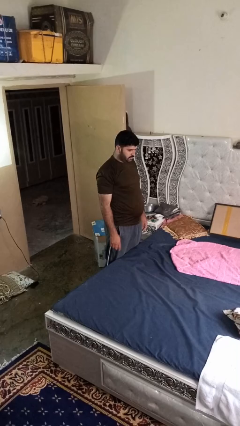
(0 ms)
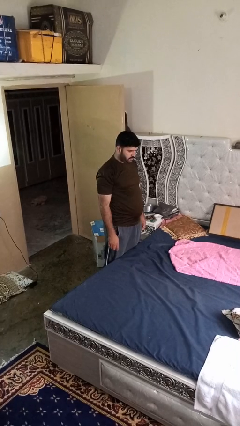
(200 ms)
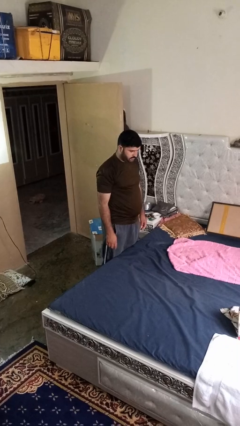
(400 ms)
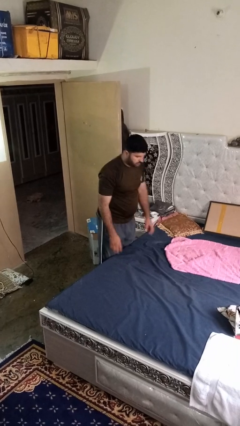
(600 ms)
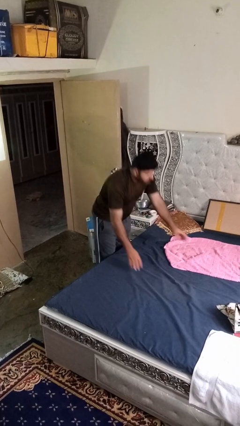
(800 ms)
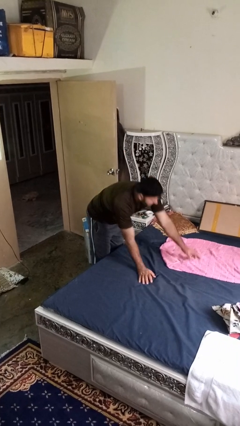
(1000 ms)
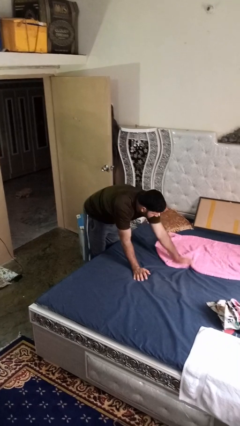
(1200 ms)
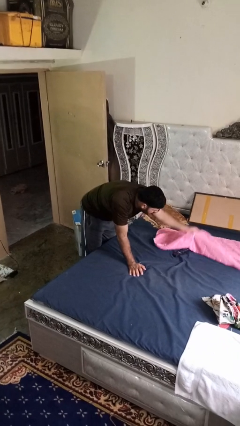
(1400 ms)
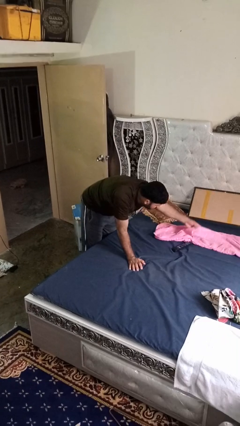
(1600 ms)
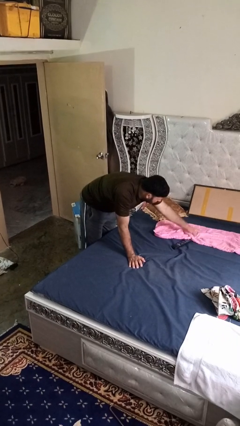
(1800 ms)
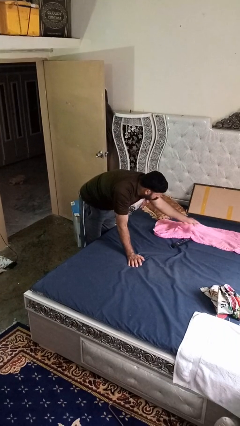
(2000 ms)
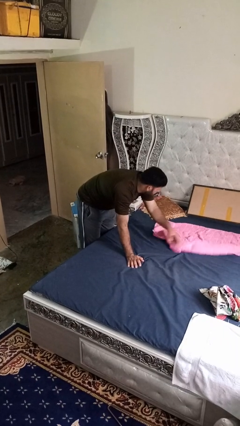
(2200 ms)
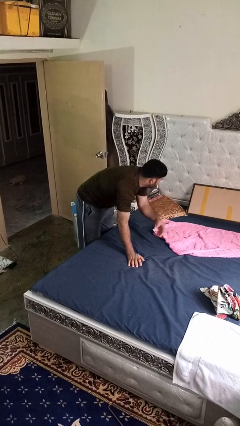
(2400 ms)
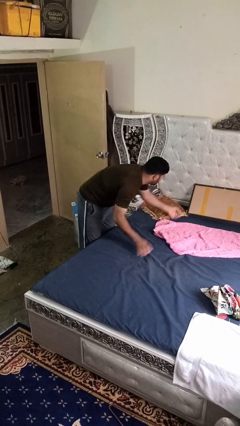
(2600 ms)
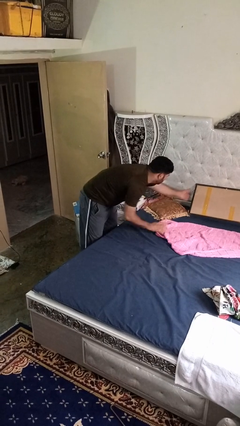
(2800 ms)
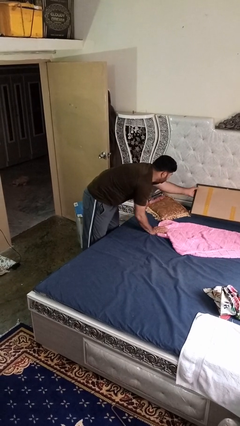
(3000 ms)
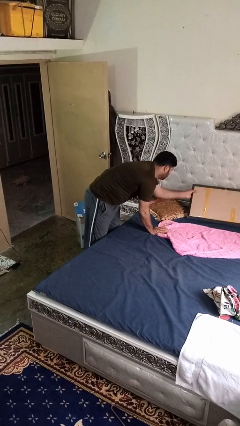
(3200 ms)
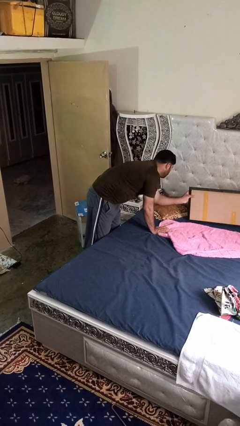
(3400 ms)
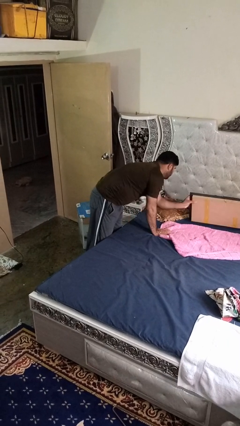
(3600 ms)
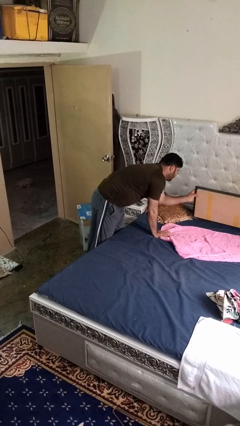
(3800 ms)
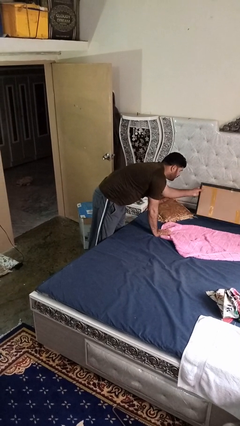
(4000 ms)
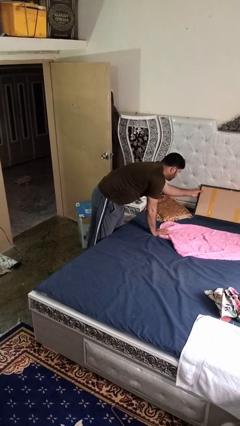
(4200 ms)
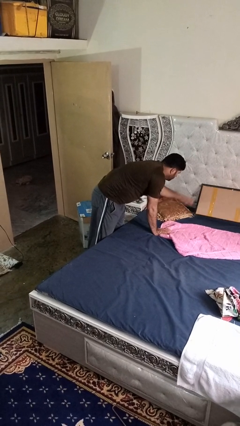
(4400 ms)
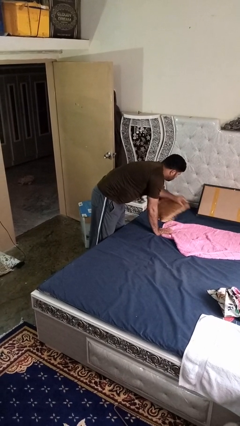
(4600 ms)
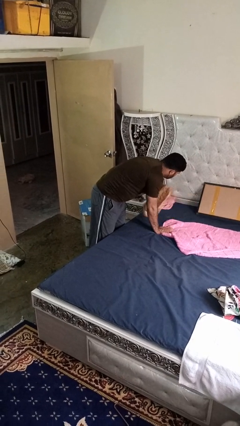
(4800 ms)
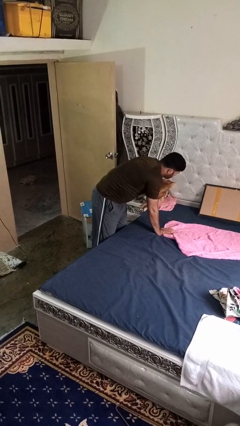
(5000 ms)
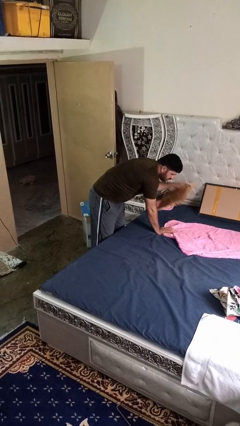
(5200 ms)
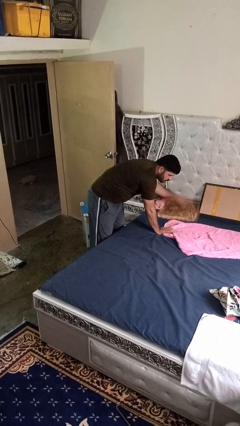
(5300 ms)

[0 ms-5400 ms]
person searches under bed

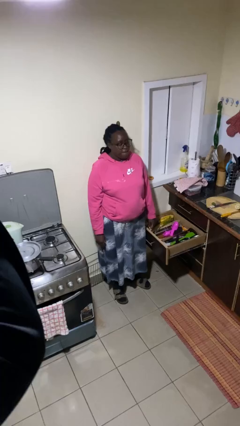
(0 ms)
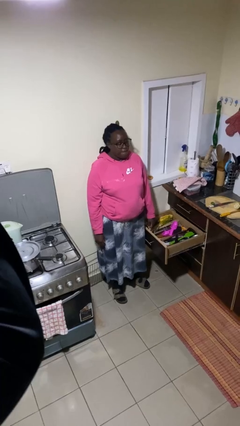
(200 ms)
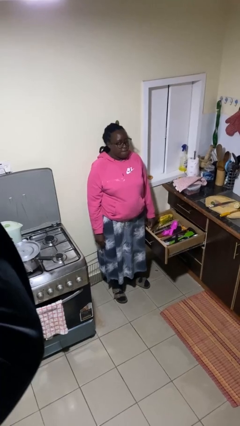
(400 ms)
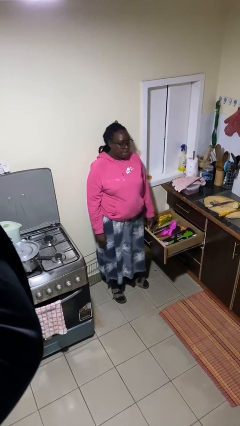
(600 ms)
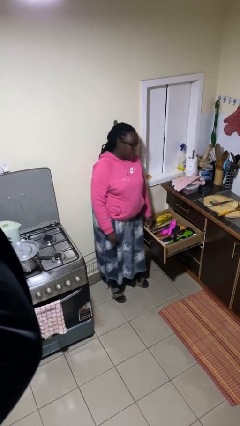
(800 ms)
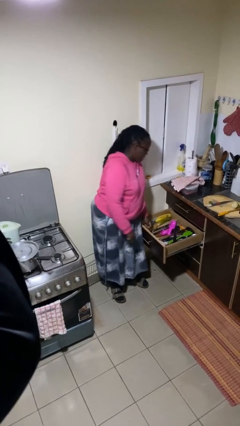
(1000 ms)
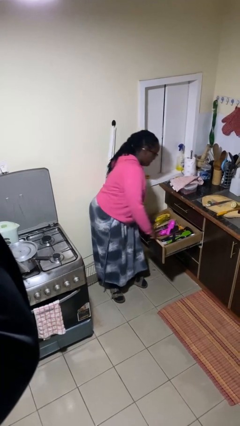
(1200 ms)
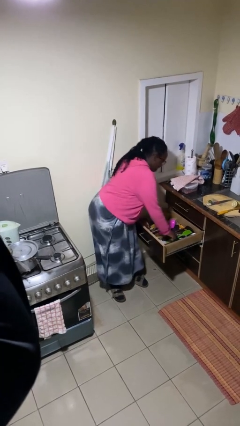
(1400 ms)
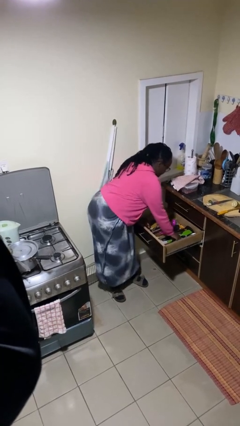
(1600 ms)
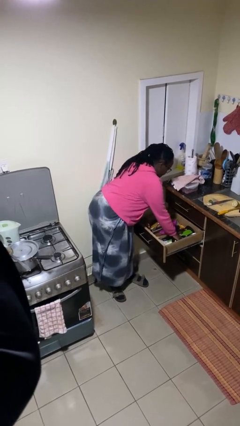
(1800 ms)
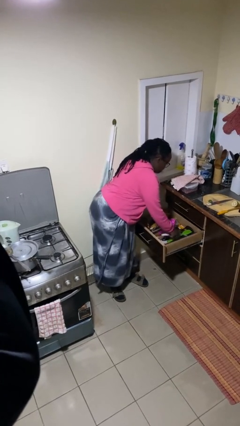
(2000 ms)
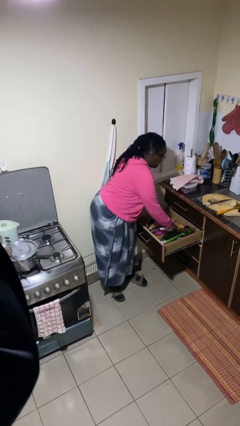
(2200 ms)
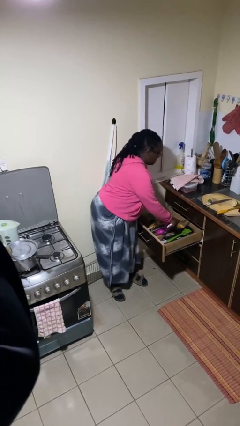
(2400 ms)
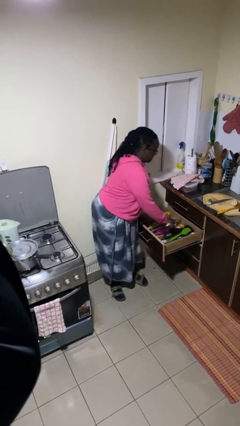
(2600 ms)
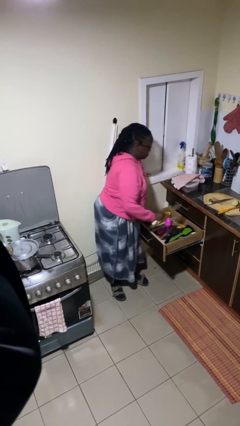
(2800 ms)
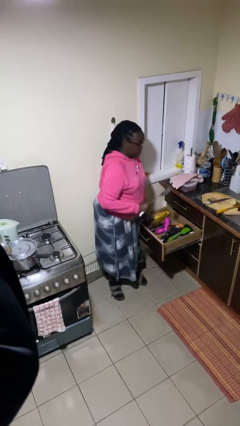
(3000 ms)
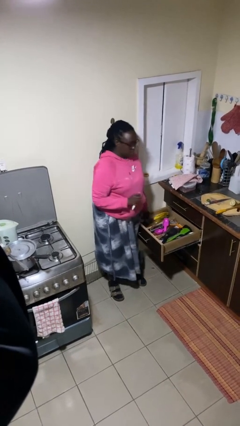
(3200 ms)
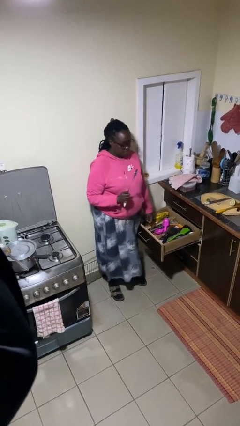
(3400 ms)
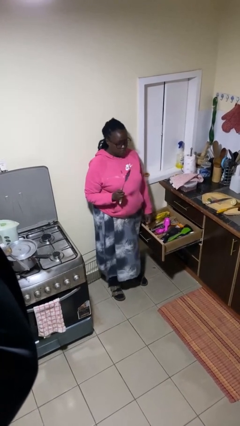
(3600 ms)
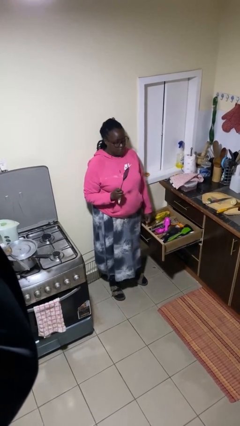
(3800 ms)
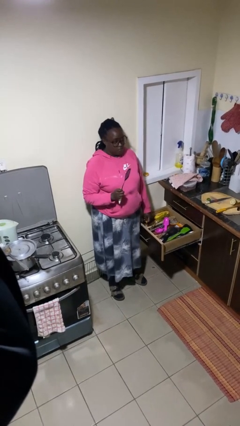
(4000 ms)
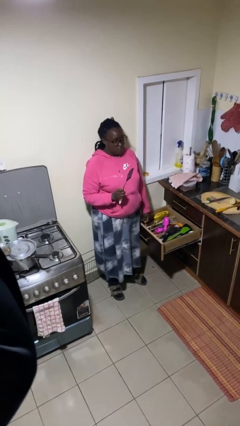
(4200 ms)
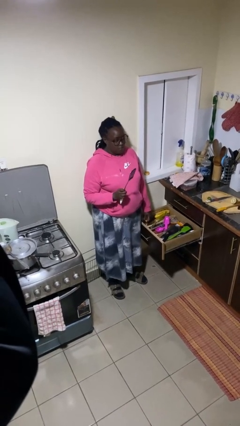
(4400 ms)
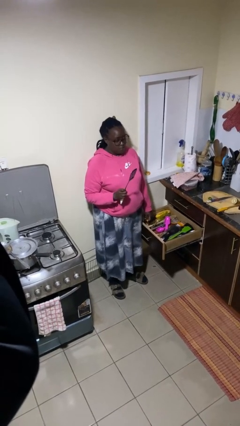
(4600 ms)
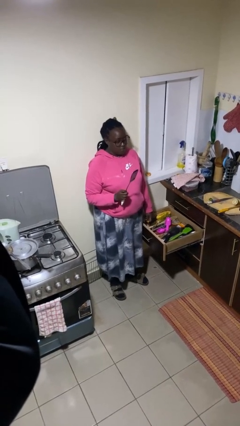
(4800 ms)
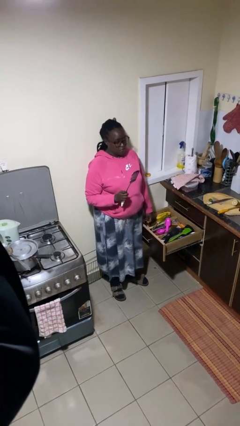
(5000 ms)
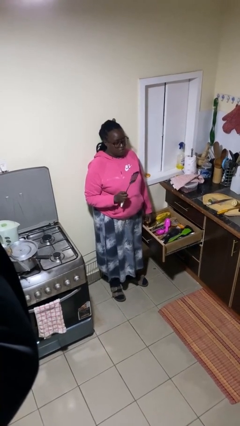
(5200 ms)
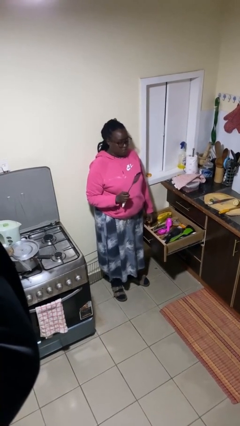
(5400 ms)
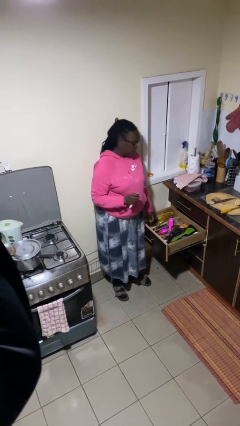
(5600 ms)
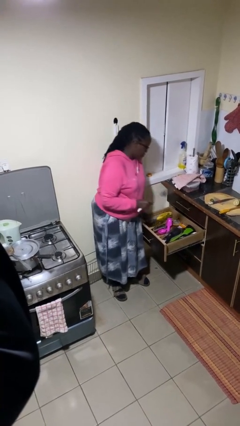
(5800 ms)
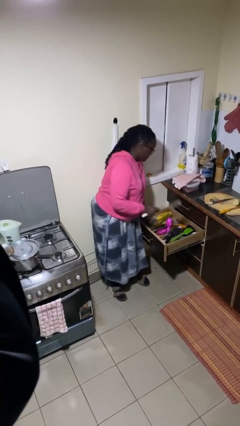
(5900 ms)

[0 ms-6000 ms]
person takes object from kitchen drawer

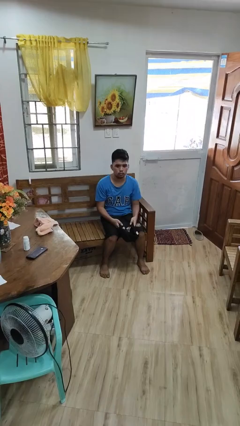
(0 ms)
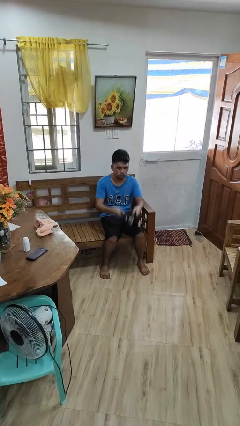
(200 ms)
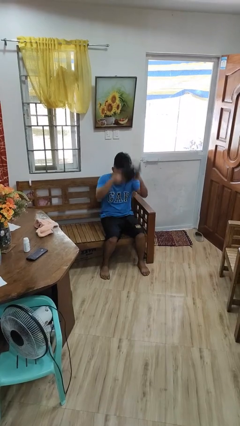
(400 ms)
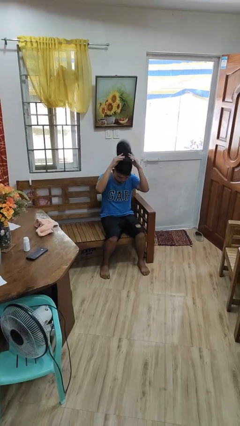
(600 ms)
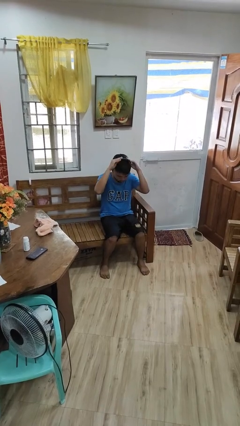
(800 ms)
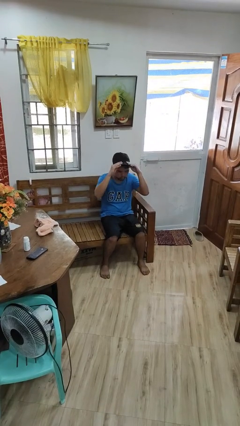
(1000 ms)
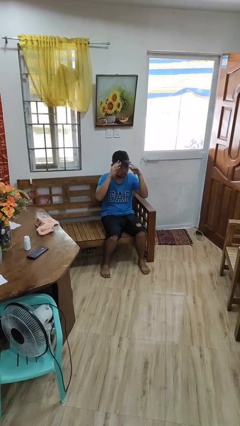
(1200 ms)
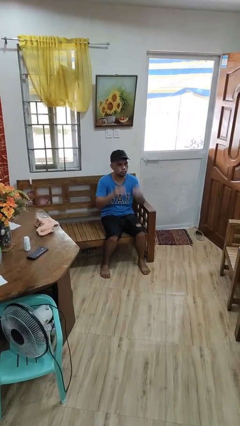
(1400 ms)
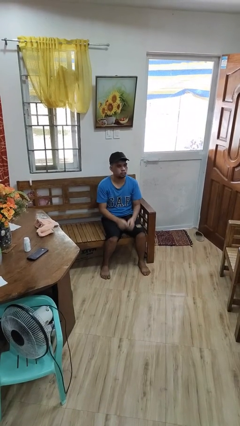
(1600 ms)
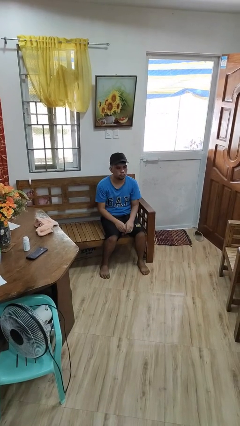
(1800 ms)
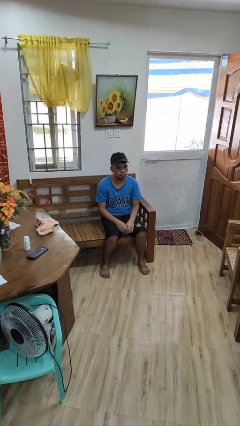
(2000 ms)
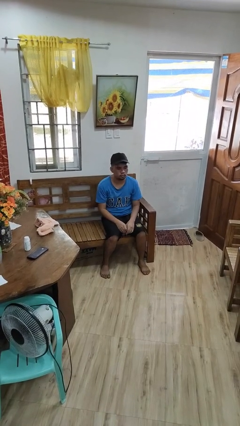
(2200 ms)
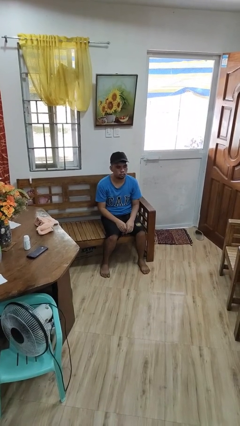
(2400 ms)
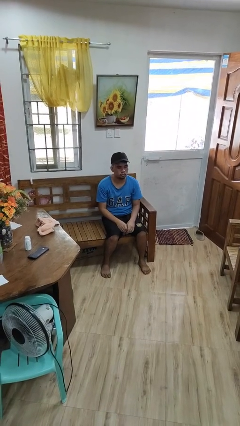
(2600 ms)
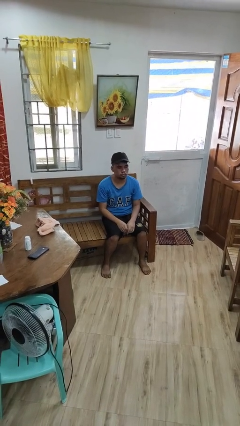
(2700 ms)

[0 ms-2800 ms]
person puts on hat

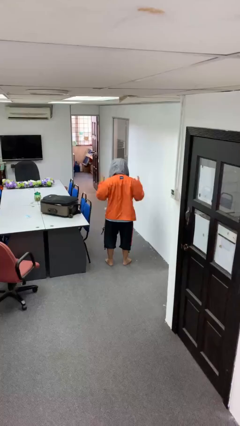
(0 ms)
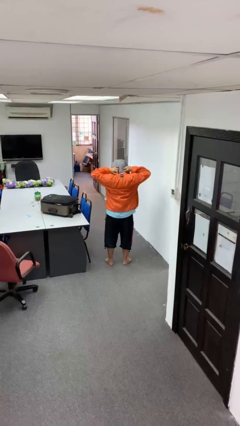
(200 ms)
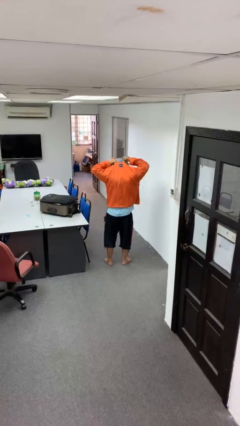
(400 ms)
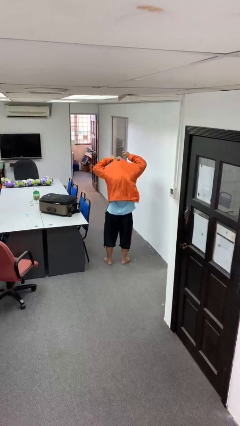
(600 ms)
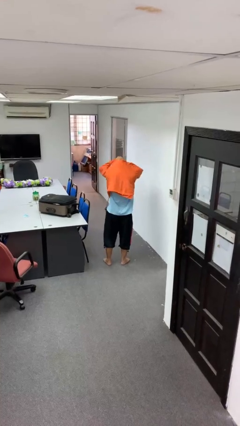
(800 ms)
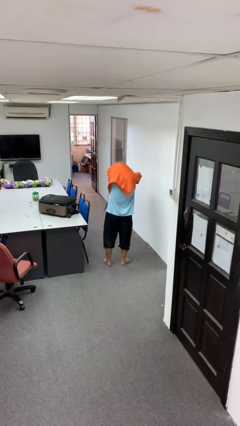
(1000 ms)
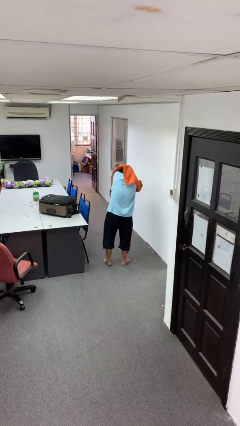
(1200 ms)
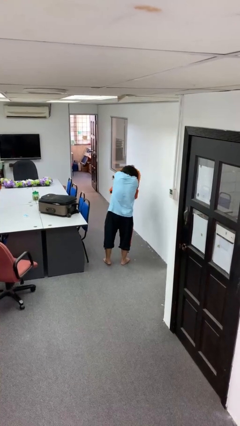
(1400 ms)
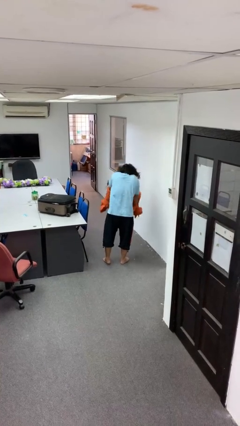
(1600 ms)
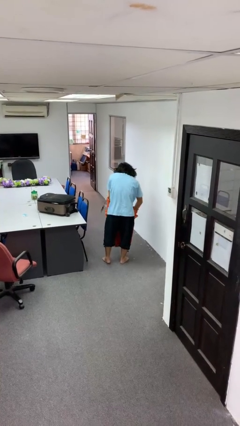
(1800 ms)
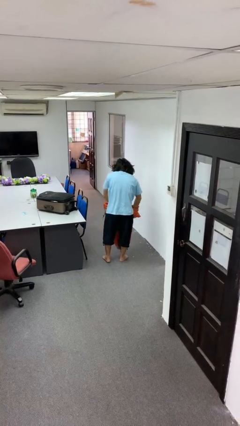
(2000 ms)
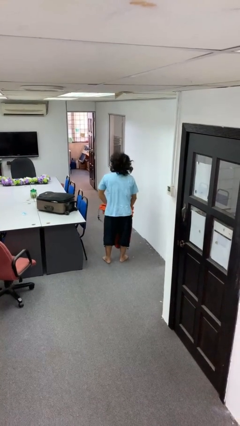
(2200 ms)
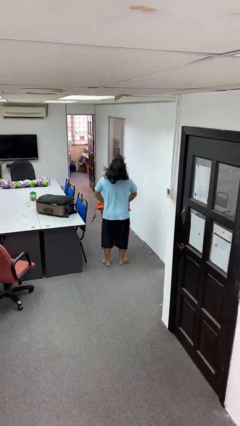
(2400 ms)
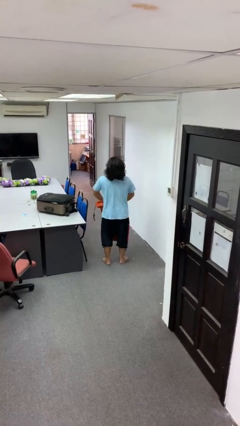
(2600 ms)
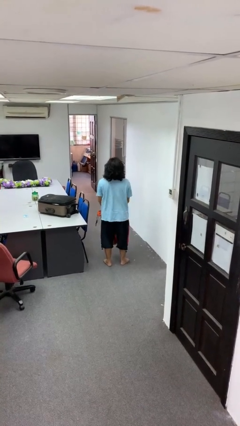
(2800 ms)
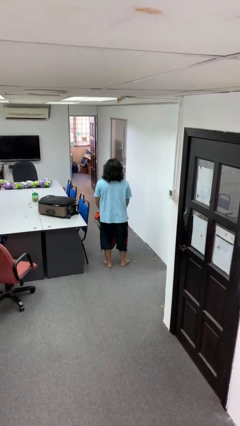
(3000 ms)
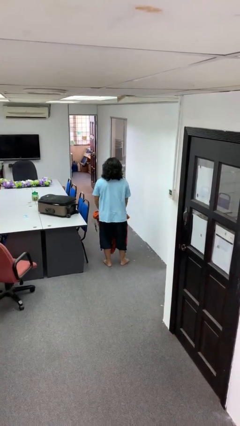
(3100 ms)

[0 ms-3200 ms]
person takes off hoodie

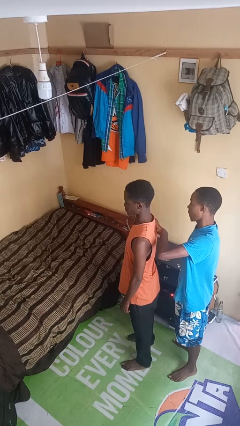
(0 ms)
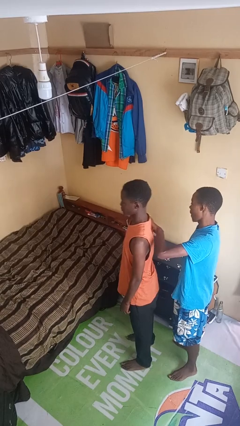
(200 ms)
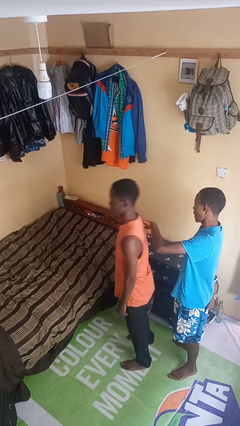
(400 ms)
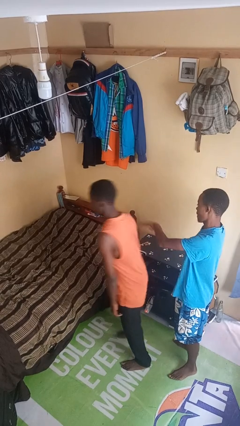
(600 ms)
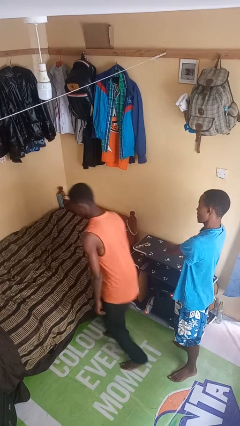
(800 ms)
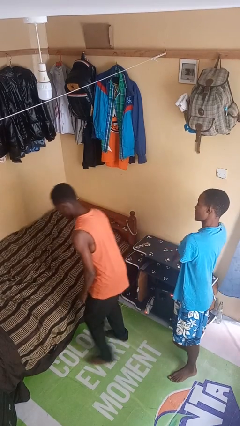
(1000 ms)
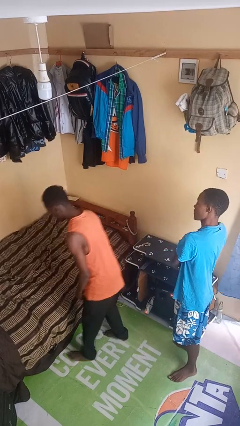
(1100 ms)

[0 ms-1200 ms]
person shoves person
